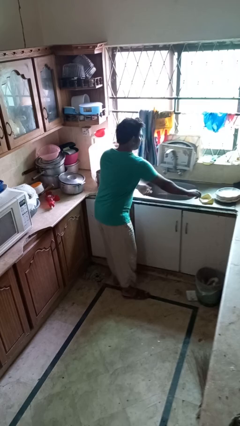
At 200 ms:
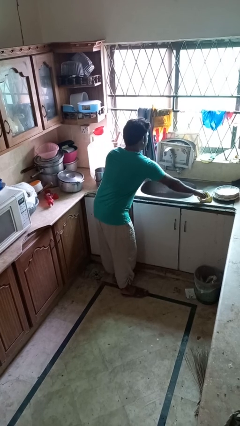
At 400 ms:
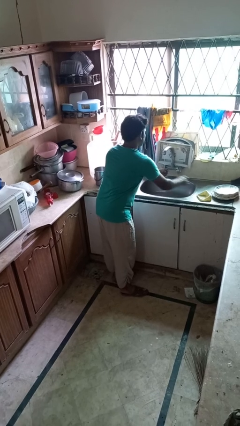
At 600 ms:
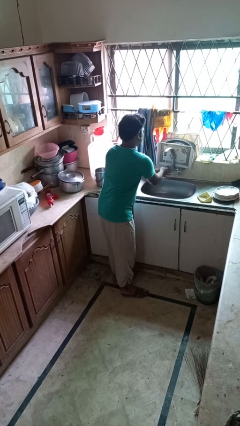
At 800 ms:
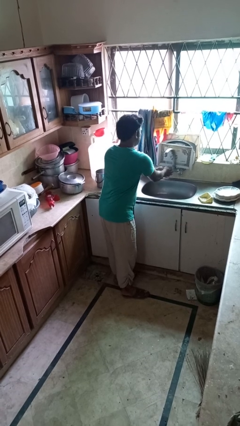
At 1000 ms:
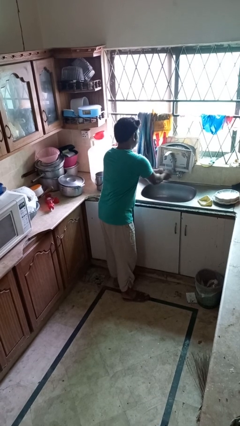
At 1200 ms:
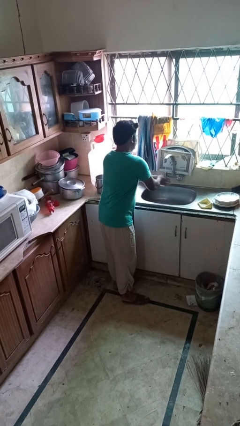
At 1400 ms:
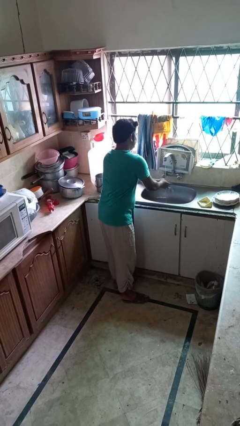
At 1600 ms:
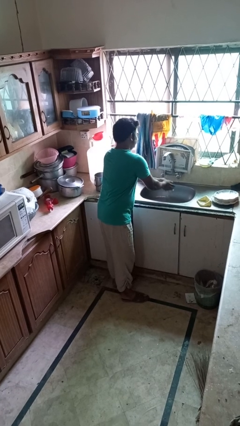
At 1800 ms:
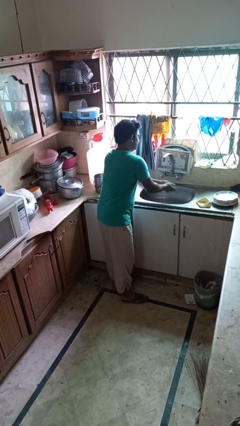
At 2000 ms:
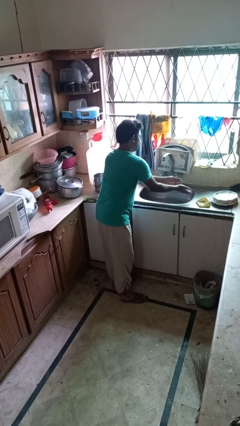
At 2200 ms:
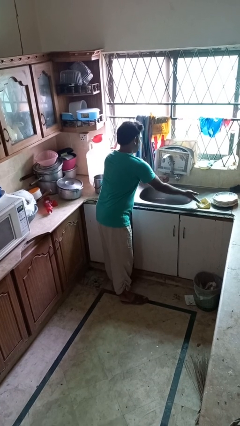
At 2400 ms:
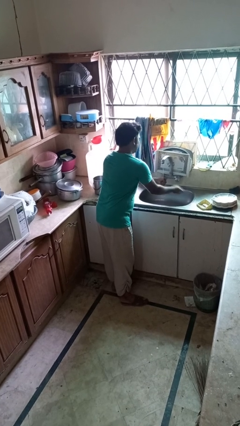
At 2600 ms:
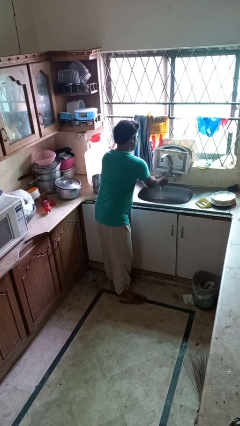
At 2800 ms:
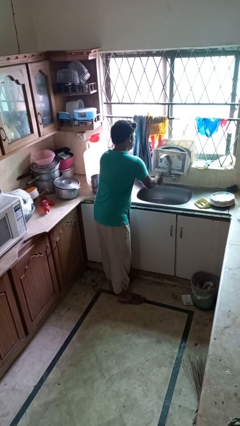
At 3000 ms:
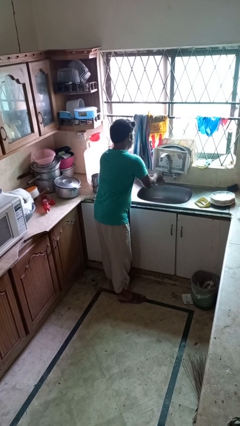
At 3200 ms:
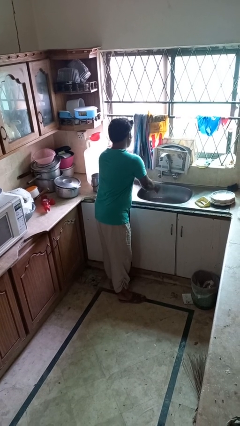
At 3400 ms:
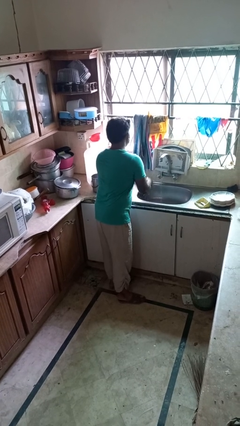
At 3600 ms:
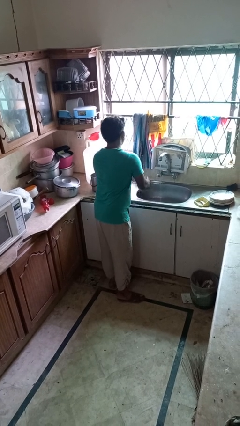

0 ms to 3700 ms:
person washes hands

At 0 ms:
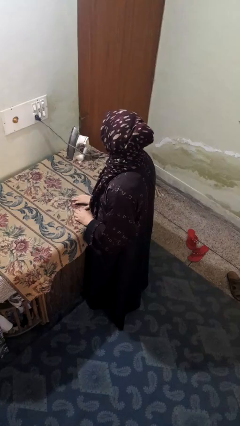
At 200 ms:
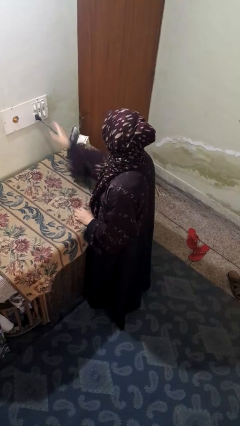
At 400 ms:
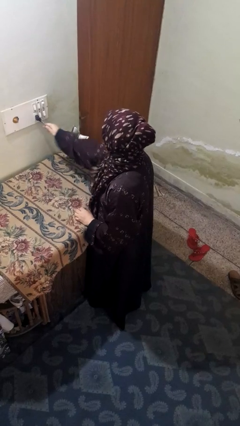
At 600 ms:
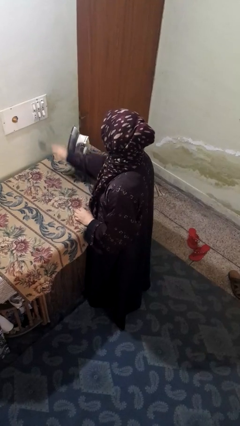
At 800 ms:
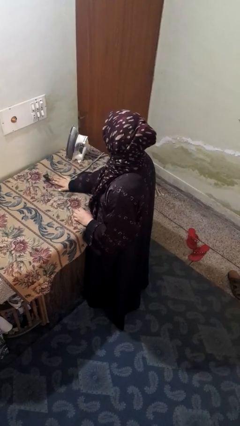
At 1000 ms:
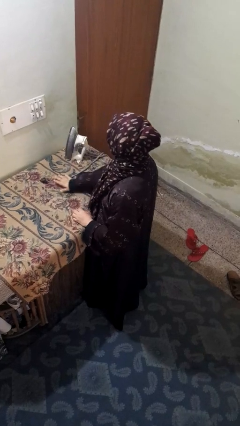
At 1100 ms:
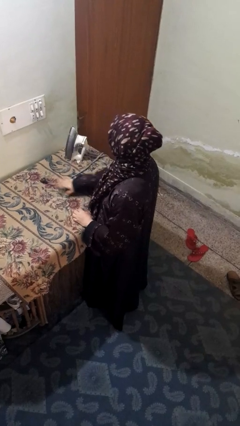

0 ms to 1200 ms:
person unplugs from electrical socket

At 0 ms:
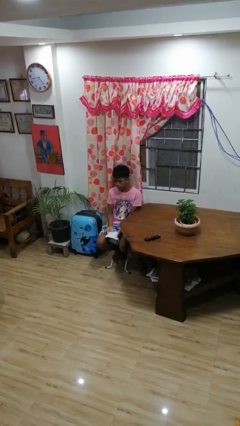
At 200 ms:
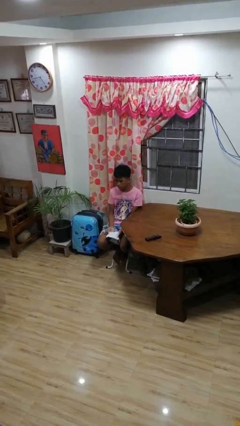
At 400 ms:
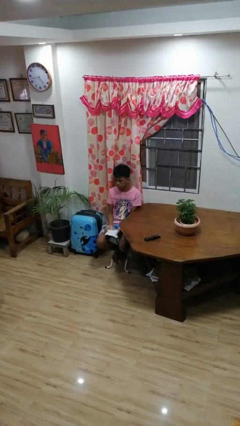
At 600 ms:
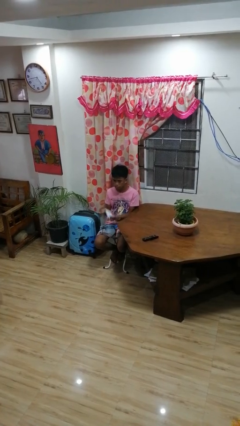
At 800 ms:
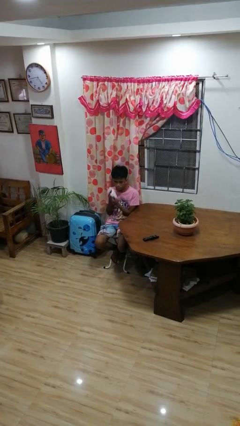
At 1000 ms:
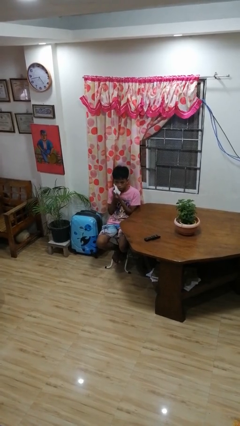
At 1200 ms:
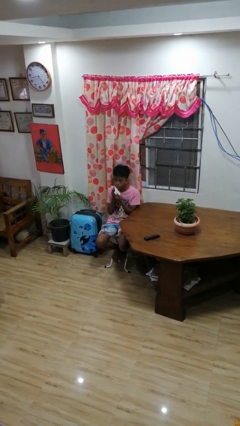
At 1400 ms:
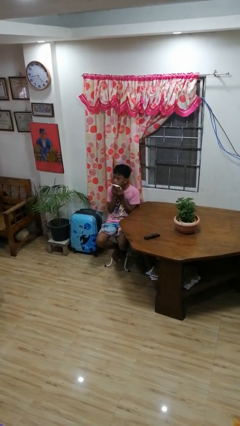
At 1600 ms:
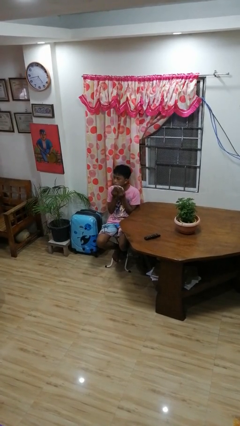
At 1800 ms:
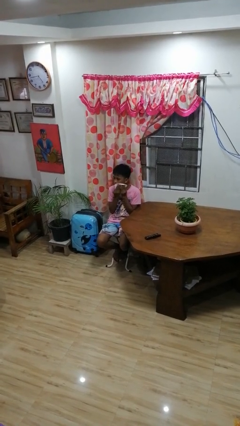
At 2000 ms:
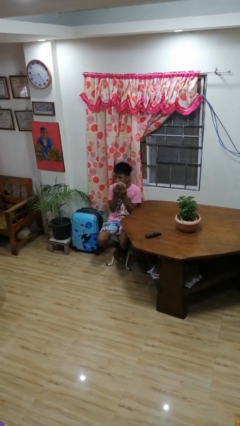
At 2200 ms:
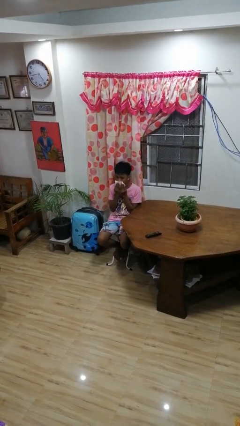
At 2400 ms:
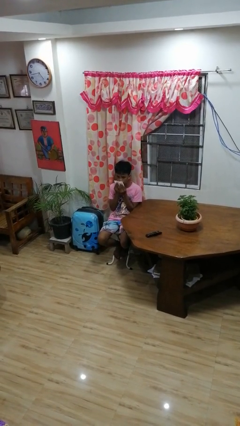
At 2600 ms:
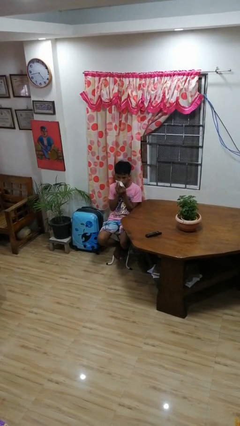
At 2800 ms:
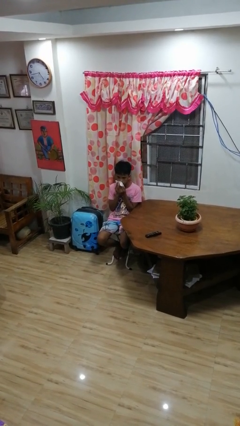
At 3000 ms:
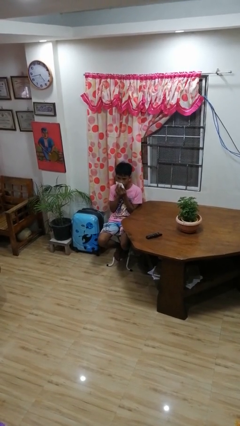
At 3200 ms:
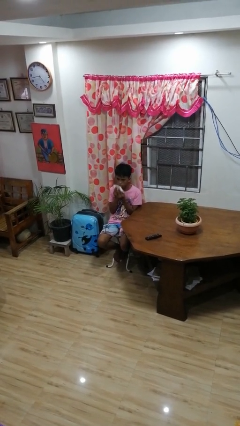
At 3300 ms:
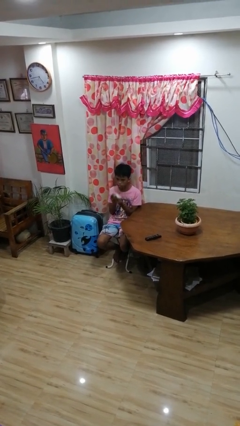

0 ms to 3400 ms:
person wipes mouth with napkin

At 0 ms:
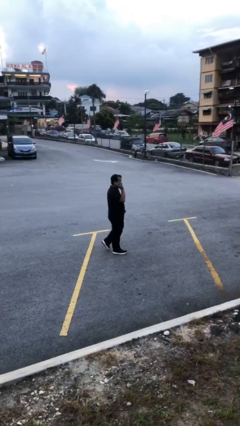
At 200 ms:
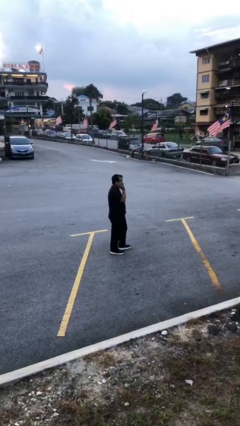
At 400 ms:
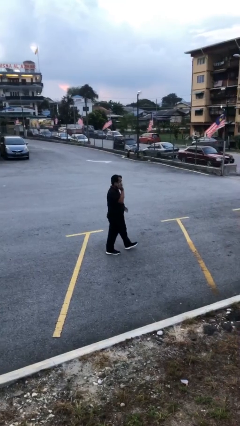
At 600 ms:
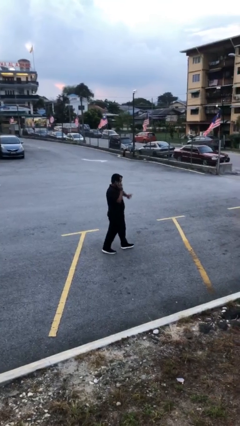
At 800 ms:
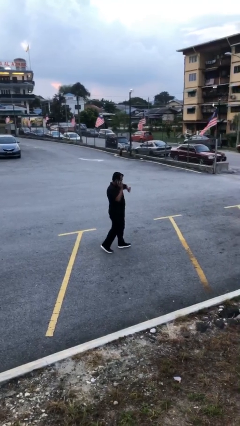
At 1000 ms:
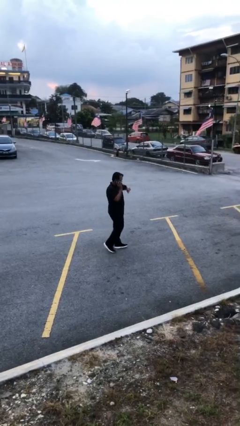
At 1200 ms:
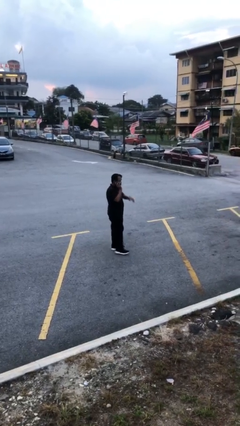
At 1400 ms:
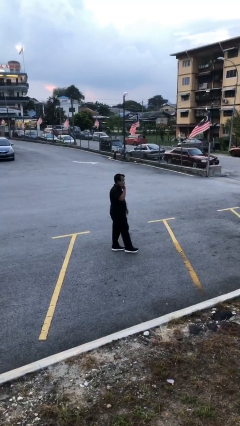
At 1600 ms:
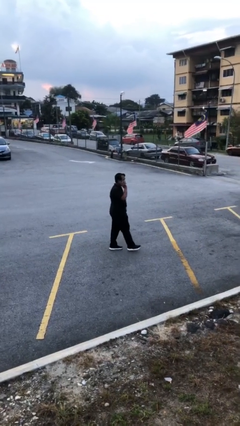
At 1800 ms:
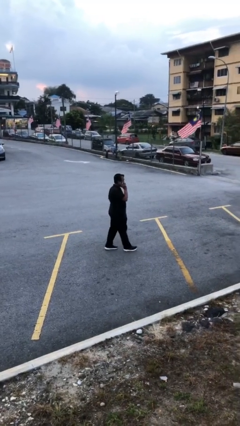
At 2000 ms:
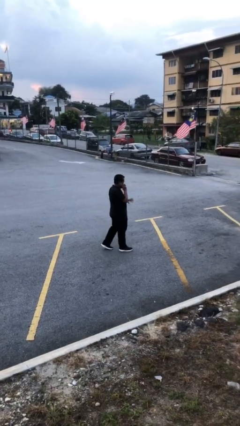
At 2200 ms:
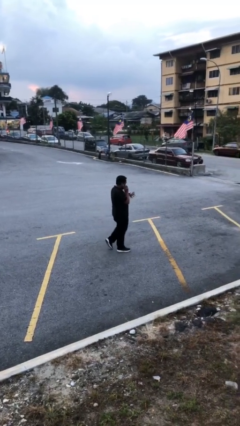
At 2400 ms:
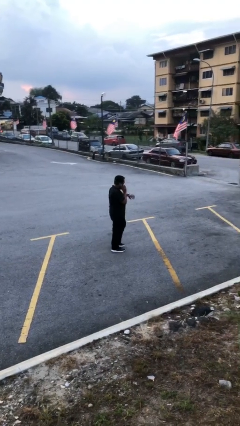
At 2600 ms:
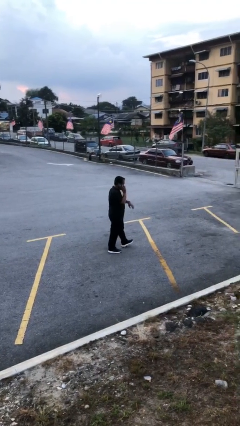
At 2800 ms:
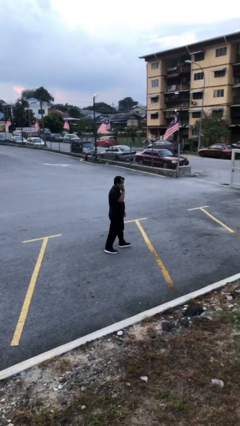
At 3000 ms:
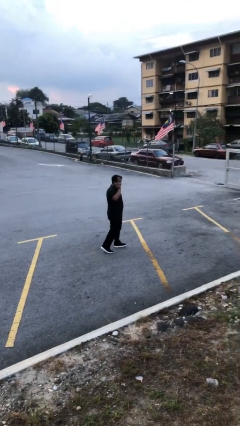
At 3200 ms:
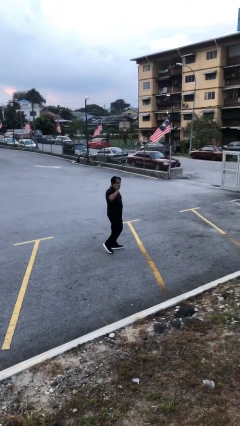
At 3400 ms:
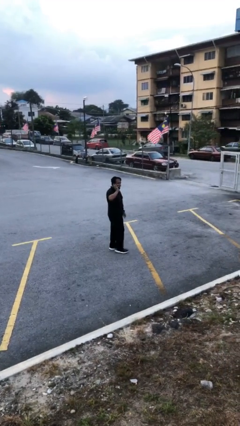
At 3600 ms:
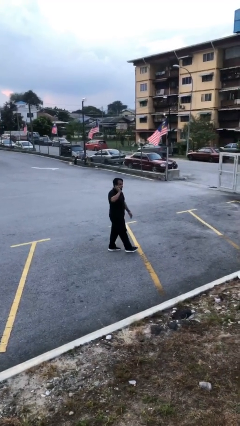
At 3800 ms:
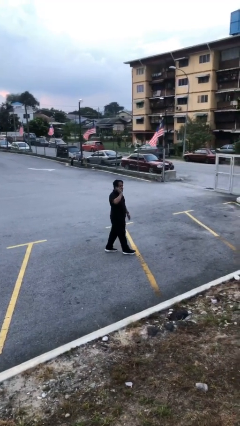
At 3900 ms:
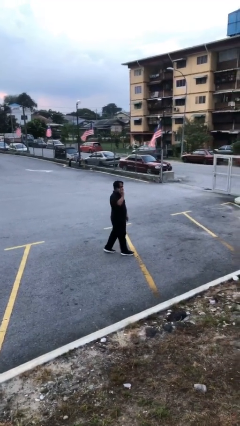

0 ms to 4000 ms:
person talks on phone

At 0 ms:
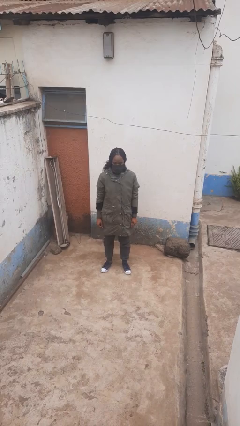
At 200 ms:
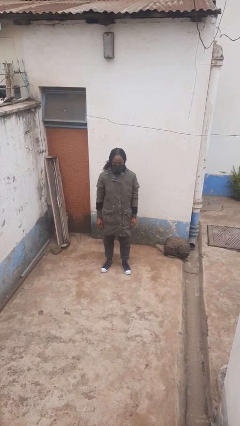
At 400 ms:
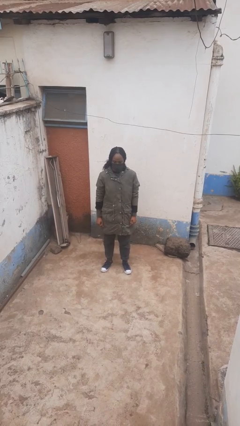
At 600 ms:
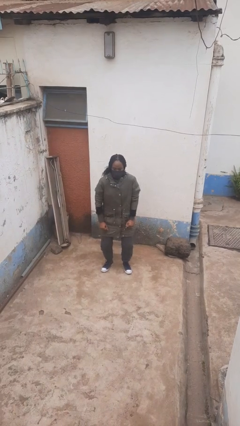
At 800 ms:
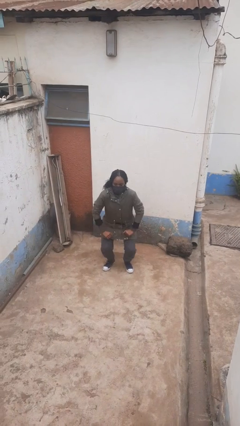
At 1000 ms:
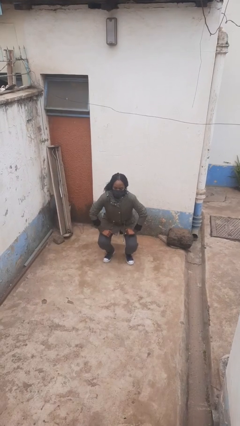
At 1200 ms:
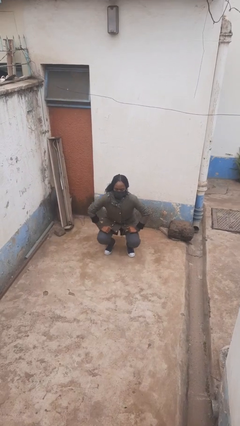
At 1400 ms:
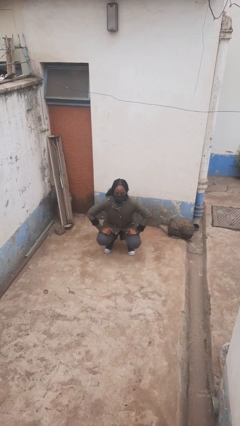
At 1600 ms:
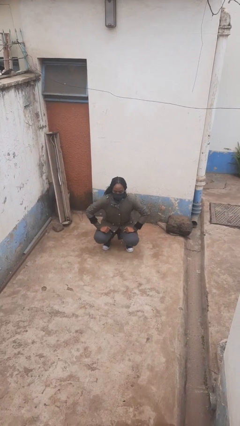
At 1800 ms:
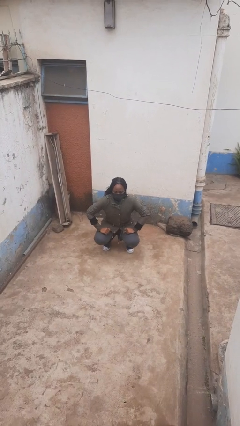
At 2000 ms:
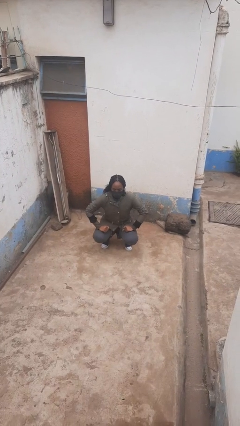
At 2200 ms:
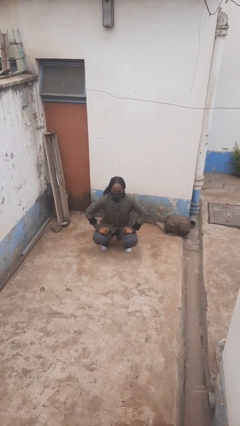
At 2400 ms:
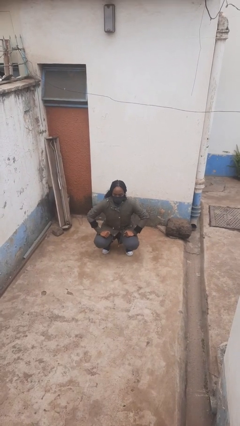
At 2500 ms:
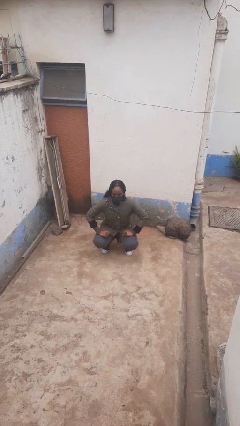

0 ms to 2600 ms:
person squats

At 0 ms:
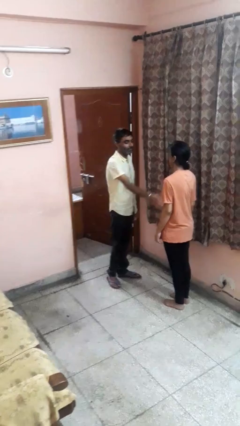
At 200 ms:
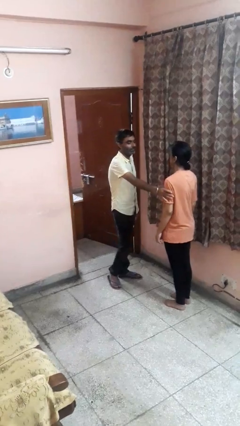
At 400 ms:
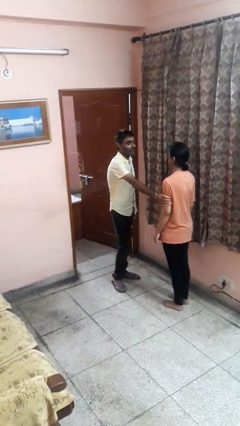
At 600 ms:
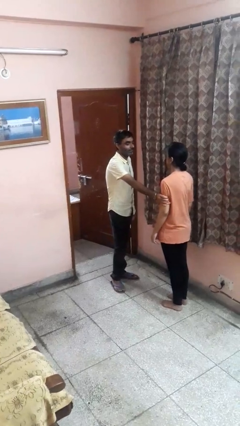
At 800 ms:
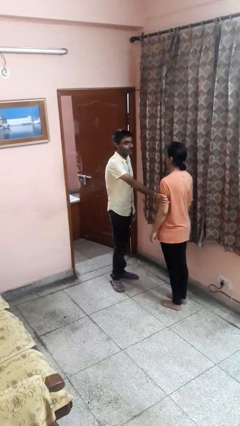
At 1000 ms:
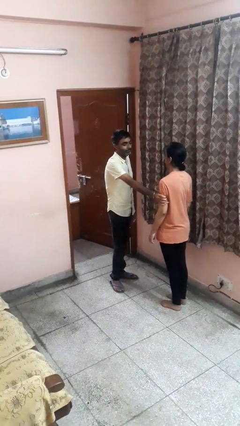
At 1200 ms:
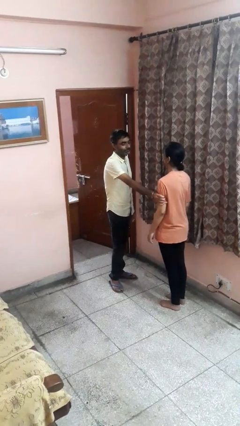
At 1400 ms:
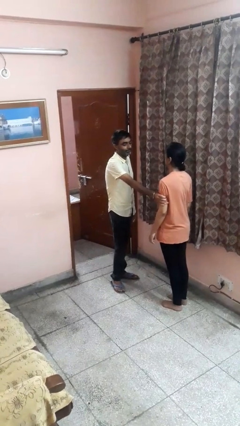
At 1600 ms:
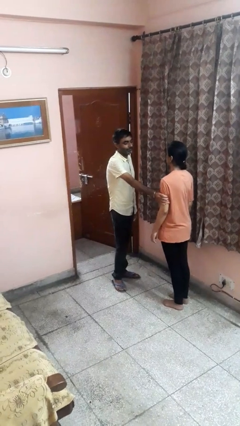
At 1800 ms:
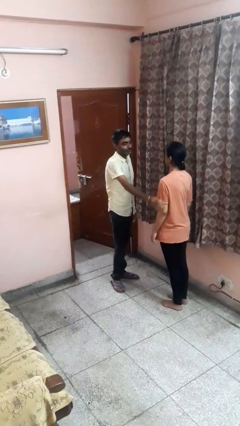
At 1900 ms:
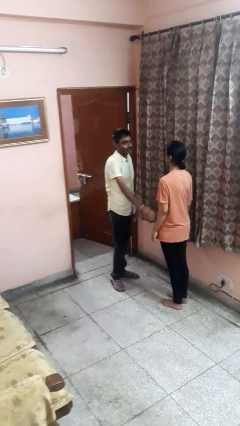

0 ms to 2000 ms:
person grabs person by bicep

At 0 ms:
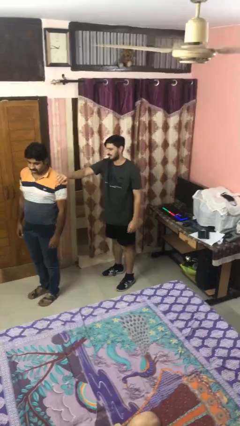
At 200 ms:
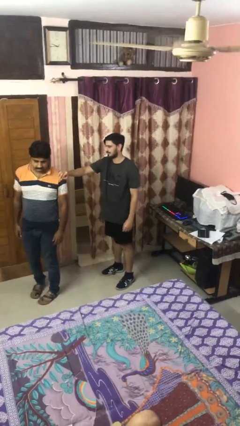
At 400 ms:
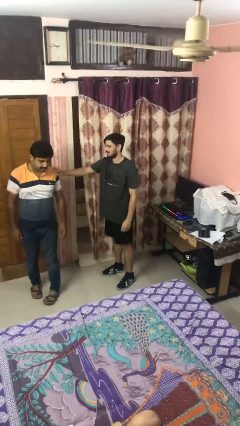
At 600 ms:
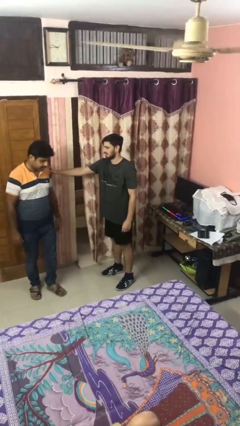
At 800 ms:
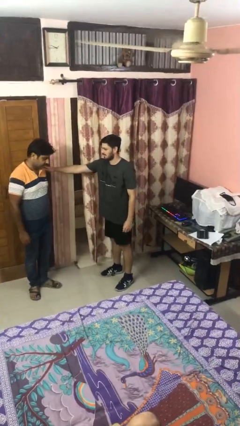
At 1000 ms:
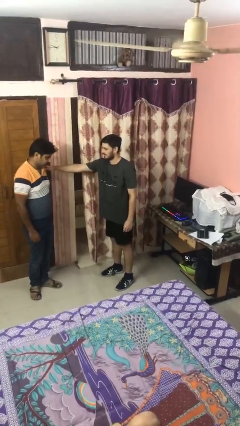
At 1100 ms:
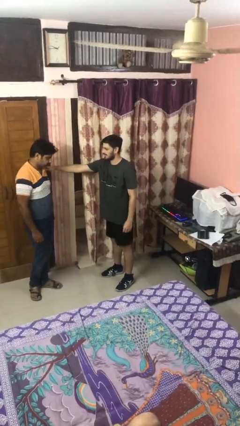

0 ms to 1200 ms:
person spins person around
